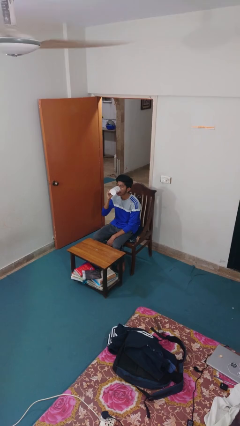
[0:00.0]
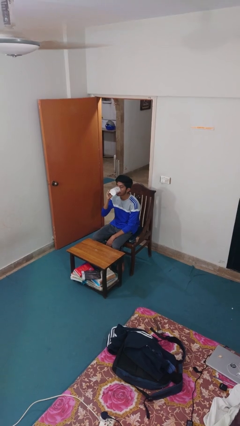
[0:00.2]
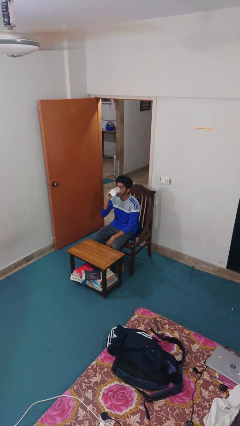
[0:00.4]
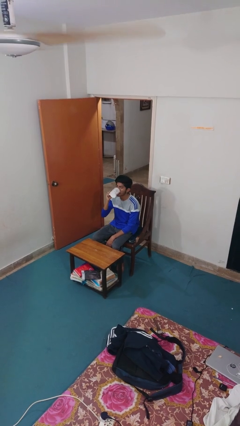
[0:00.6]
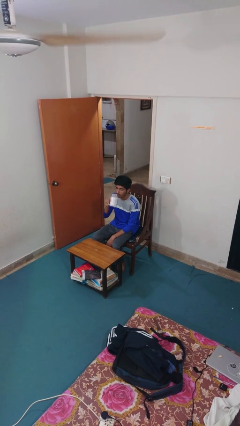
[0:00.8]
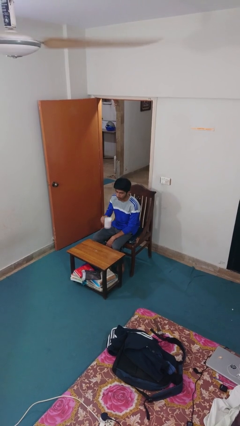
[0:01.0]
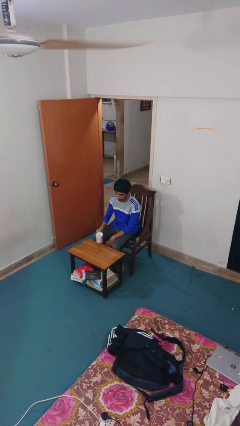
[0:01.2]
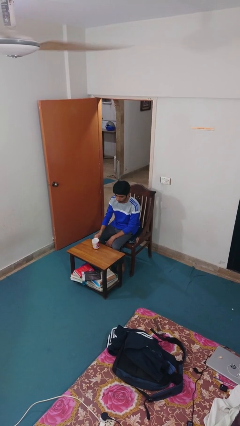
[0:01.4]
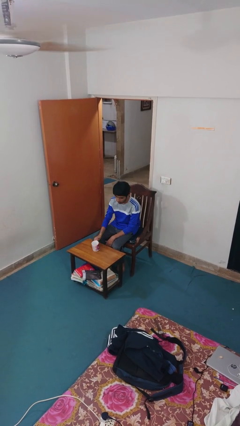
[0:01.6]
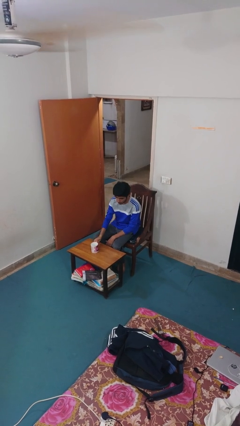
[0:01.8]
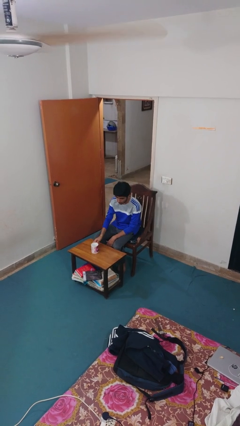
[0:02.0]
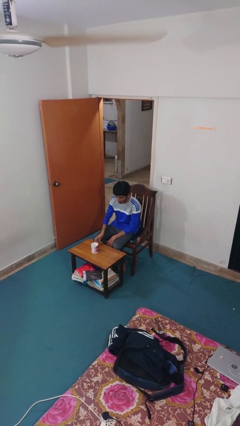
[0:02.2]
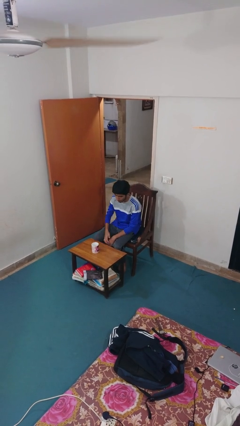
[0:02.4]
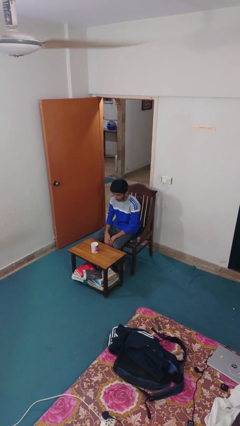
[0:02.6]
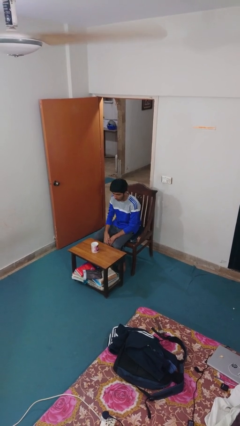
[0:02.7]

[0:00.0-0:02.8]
person puts down object on table

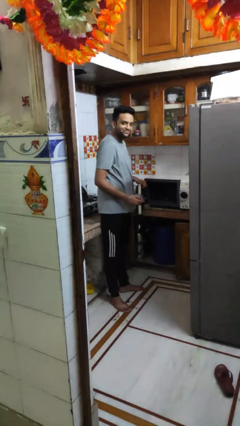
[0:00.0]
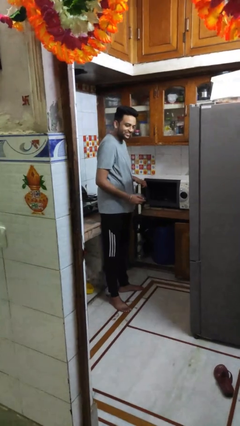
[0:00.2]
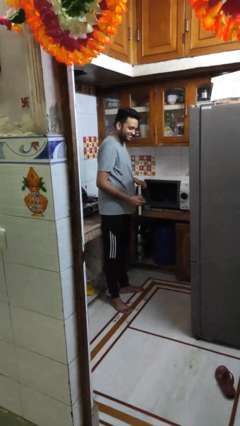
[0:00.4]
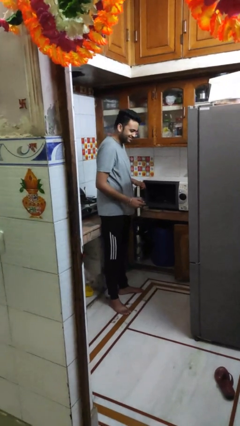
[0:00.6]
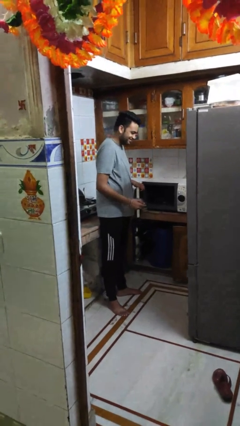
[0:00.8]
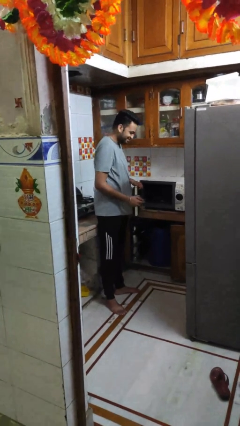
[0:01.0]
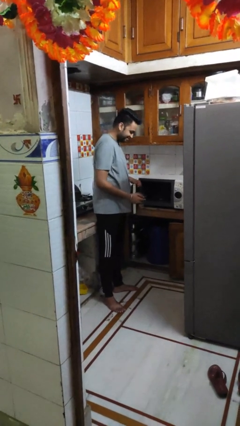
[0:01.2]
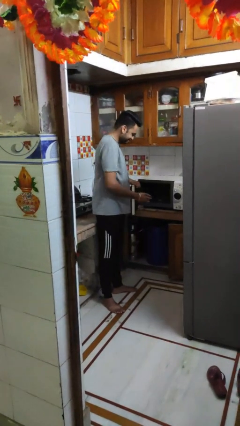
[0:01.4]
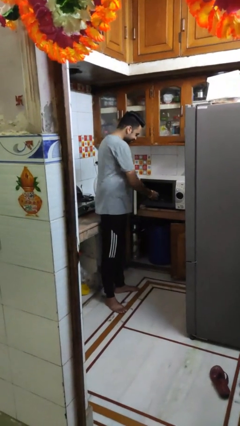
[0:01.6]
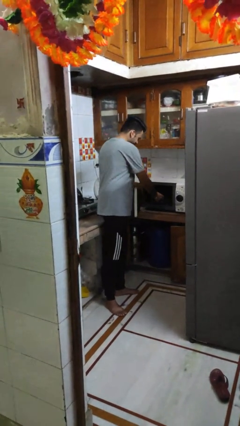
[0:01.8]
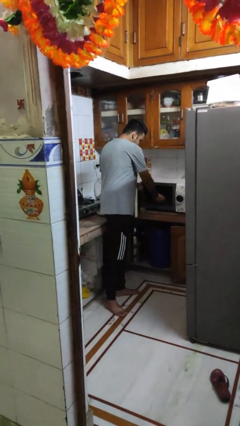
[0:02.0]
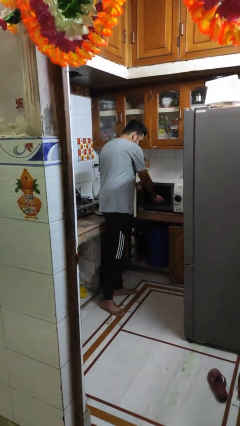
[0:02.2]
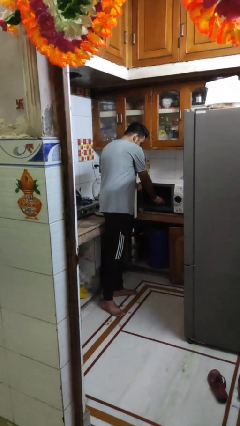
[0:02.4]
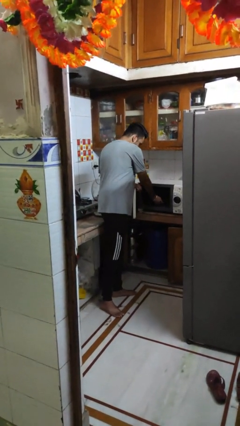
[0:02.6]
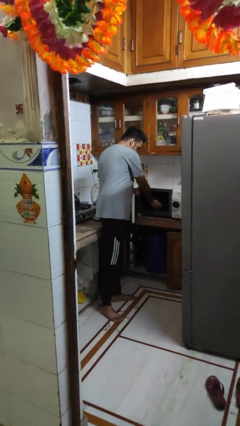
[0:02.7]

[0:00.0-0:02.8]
person puts object into microwave

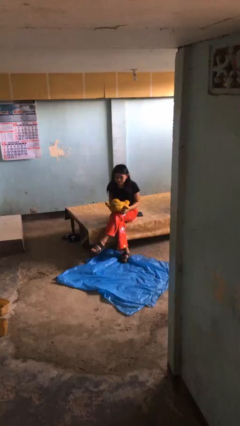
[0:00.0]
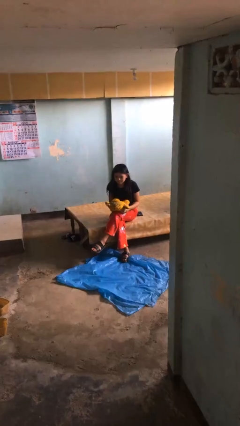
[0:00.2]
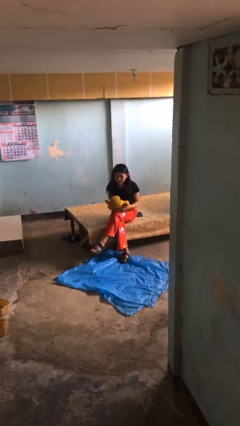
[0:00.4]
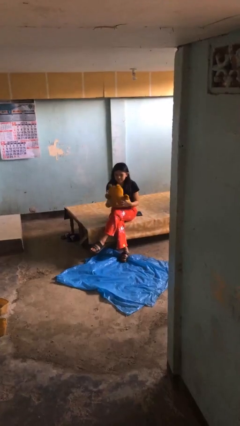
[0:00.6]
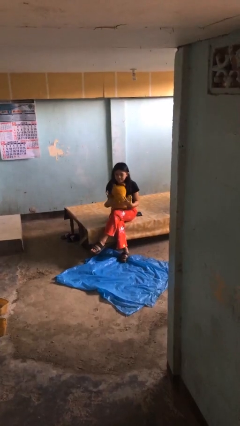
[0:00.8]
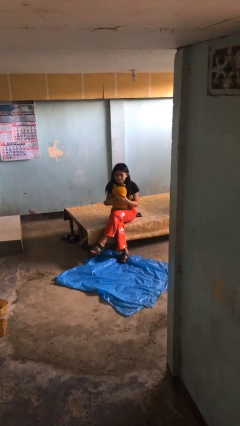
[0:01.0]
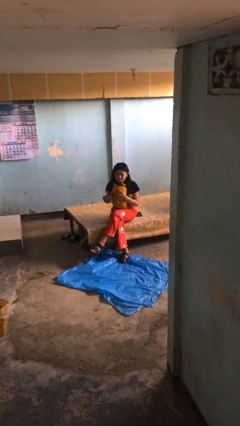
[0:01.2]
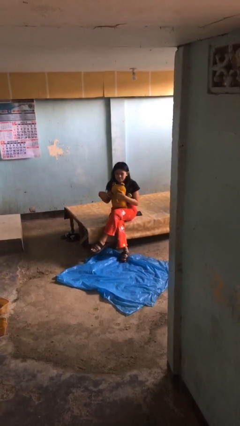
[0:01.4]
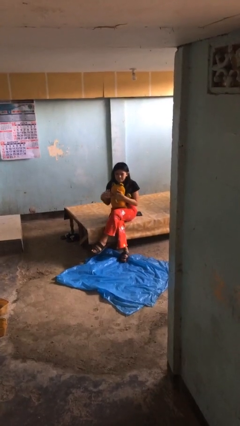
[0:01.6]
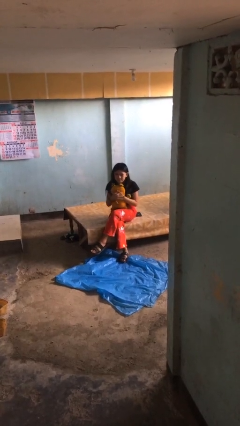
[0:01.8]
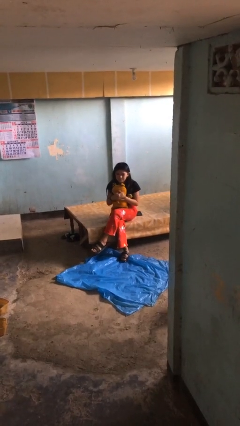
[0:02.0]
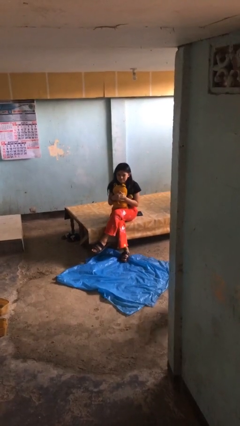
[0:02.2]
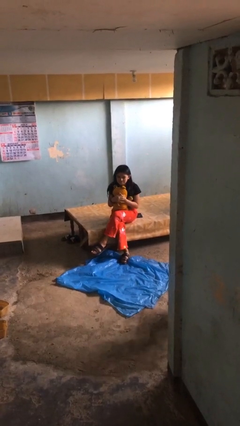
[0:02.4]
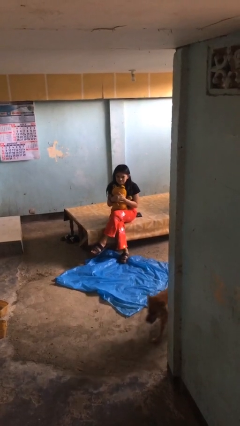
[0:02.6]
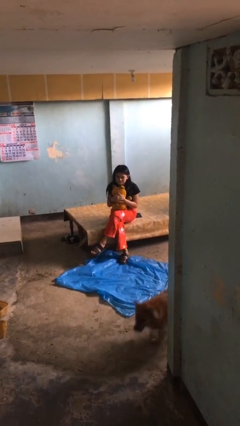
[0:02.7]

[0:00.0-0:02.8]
person hugs stuffed animal

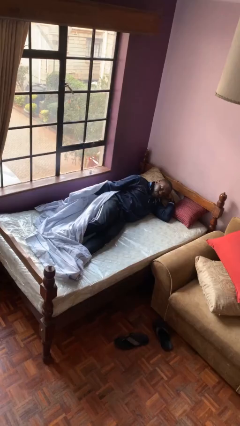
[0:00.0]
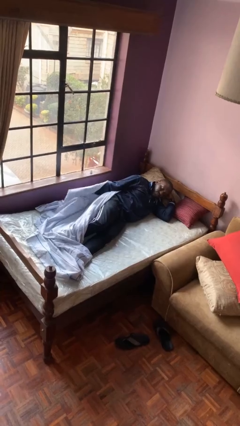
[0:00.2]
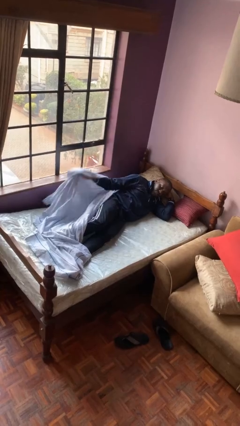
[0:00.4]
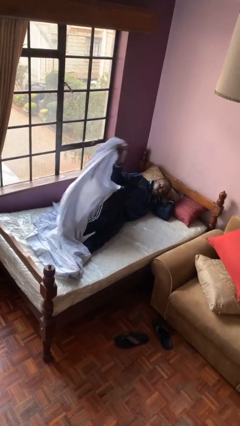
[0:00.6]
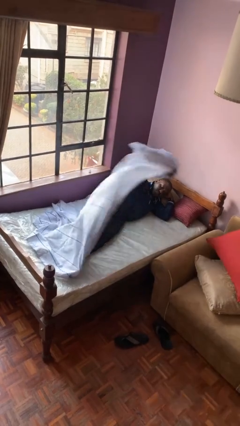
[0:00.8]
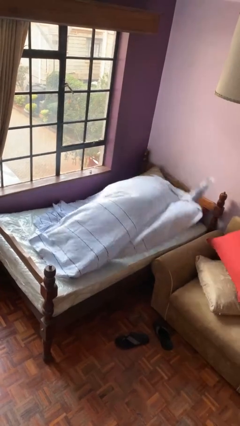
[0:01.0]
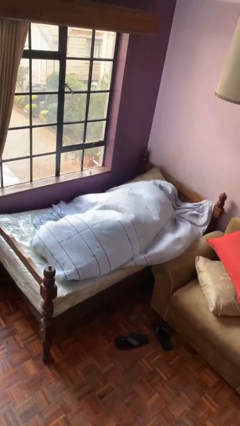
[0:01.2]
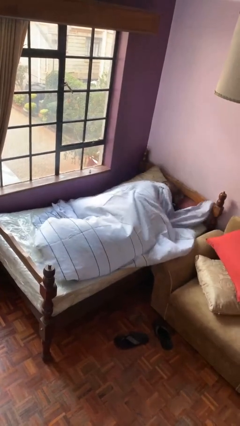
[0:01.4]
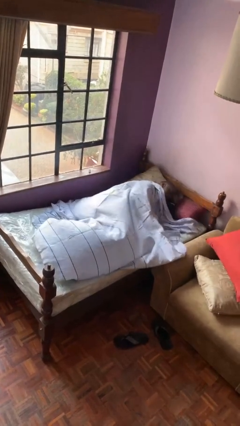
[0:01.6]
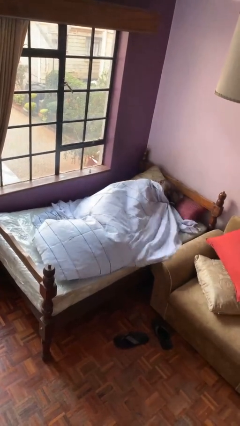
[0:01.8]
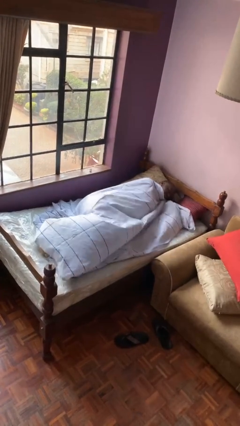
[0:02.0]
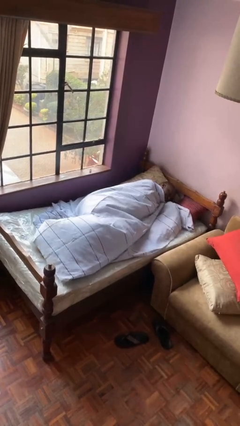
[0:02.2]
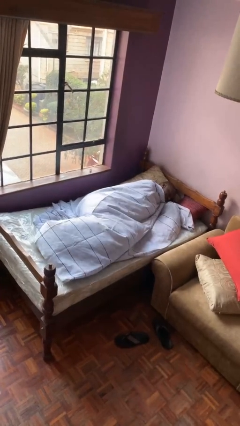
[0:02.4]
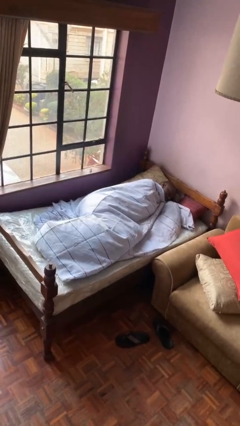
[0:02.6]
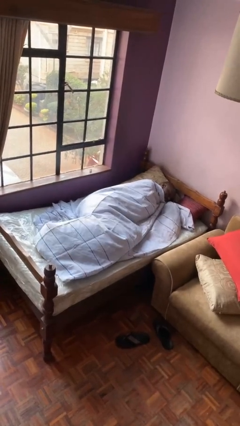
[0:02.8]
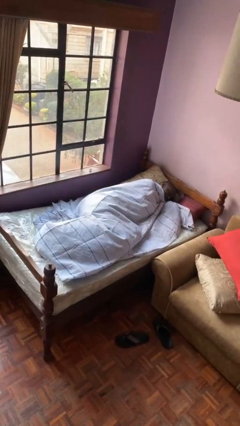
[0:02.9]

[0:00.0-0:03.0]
person covers with bedsheets

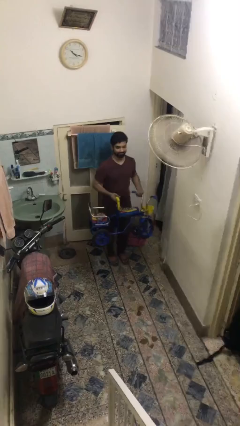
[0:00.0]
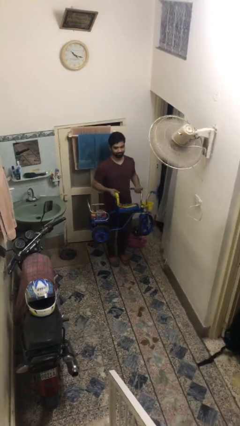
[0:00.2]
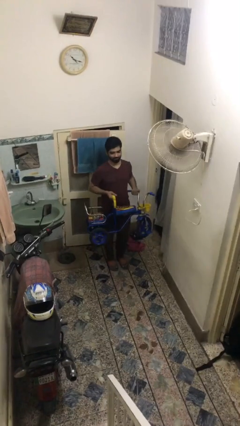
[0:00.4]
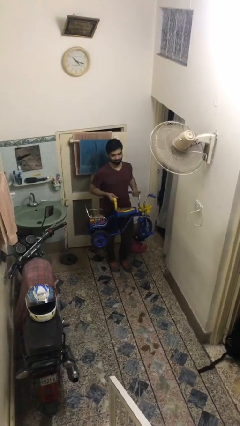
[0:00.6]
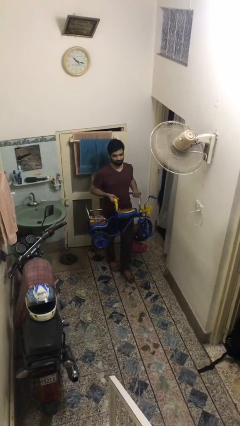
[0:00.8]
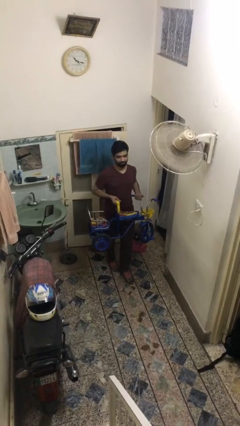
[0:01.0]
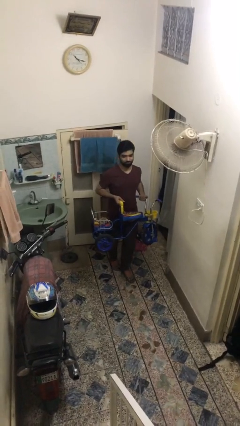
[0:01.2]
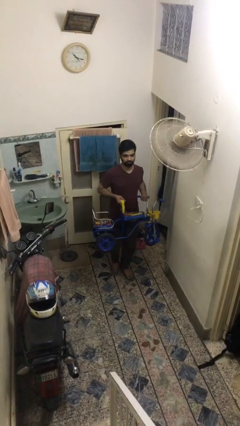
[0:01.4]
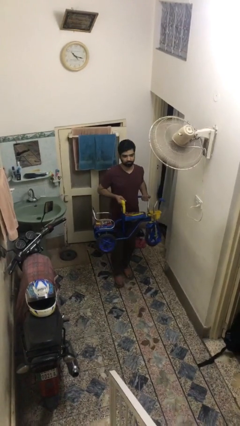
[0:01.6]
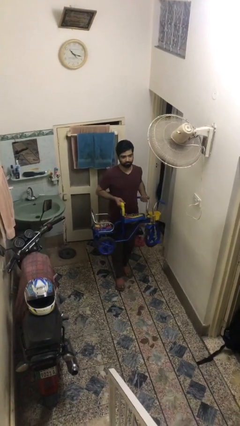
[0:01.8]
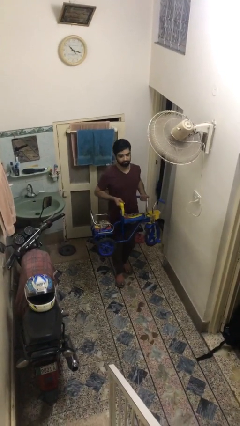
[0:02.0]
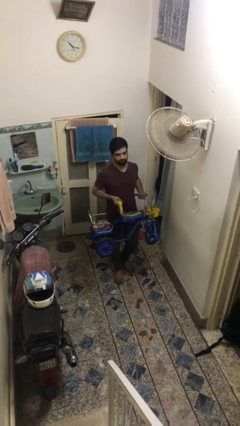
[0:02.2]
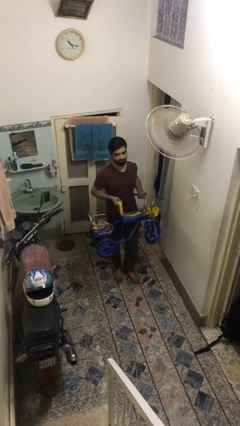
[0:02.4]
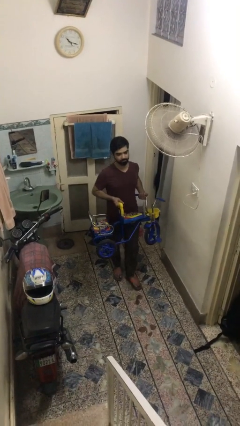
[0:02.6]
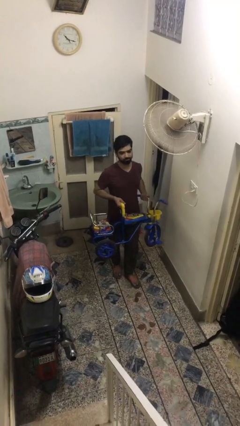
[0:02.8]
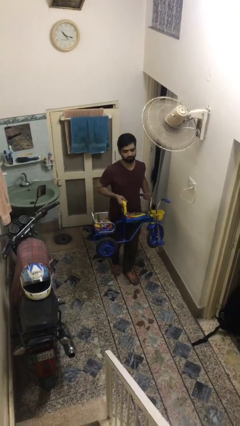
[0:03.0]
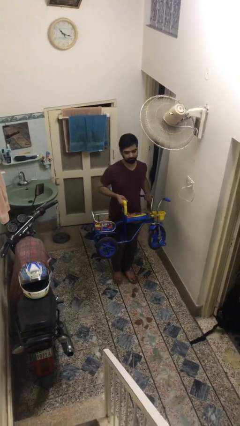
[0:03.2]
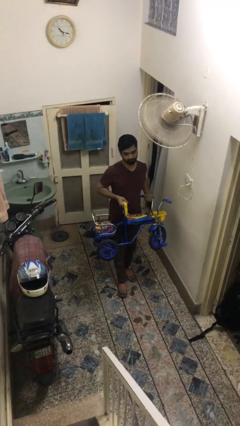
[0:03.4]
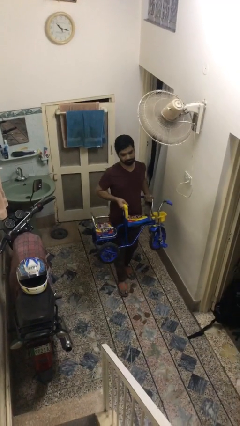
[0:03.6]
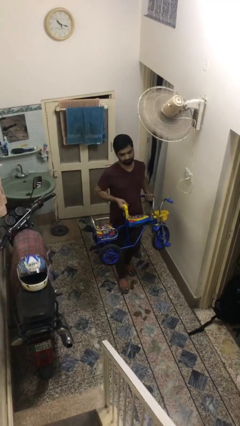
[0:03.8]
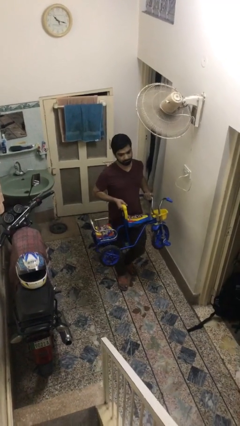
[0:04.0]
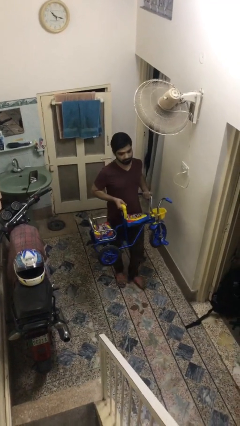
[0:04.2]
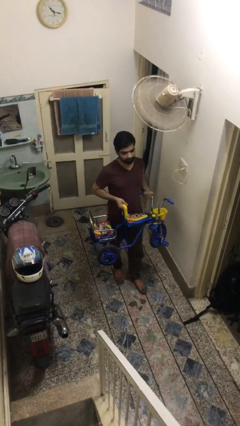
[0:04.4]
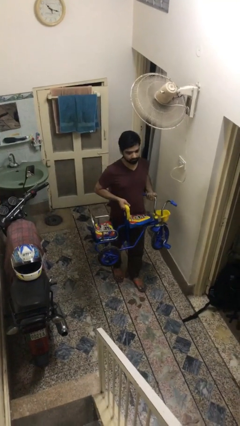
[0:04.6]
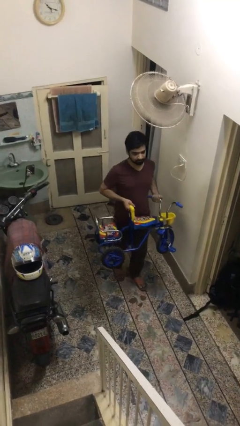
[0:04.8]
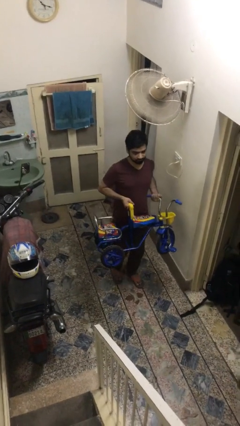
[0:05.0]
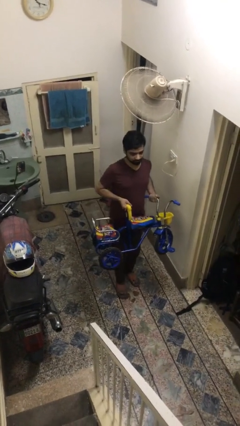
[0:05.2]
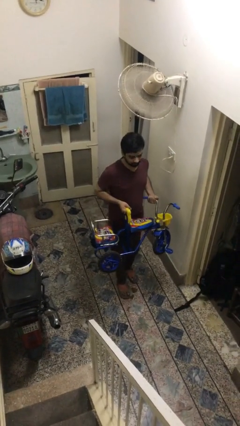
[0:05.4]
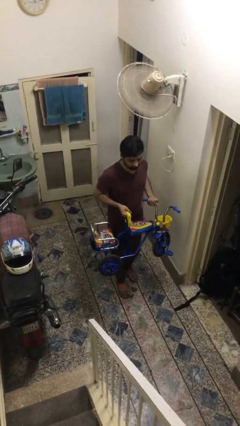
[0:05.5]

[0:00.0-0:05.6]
person carries heavy object

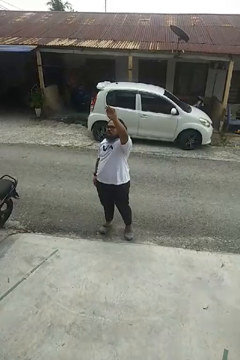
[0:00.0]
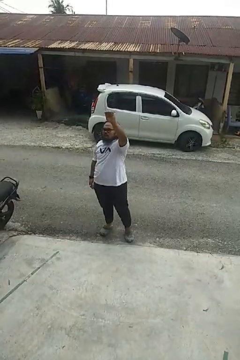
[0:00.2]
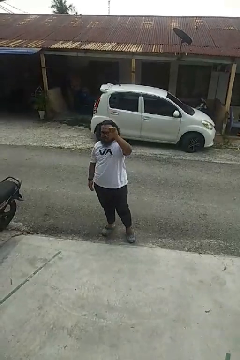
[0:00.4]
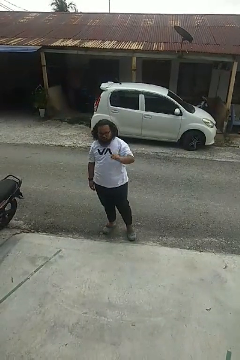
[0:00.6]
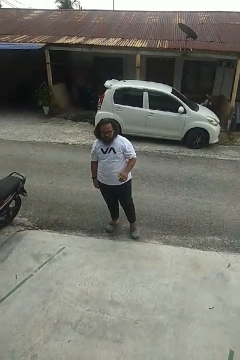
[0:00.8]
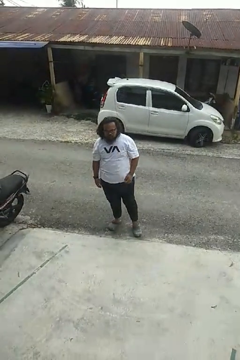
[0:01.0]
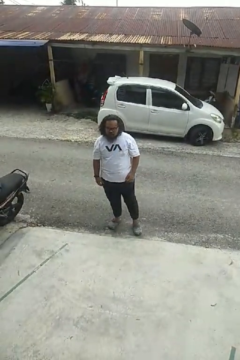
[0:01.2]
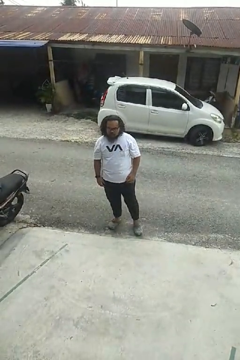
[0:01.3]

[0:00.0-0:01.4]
person gestures lower hand
